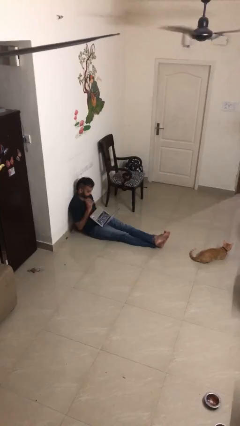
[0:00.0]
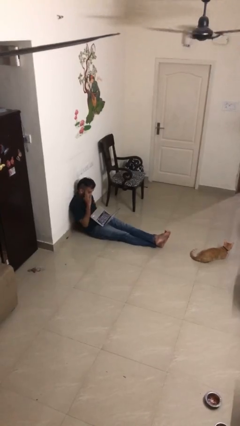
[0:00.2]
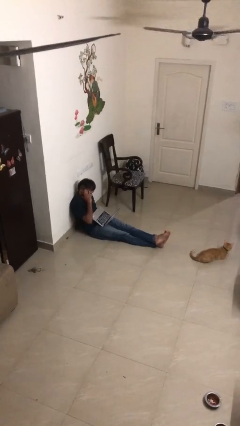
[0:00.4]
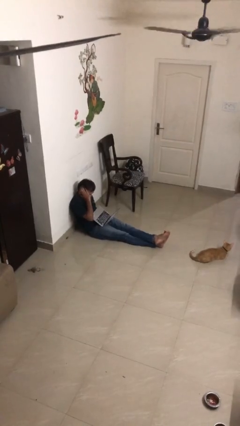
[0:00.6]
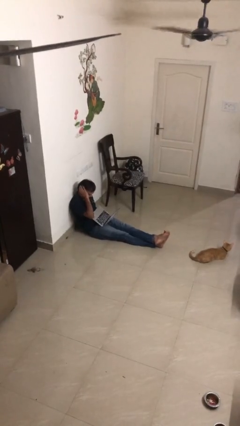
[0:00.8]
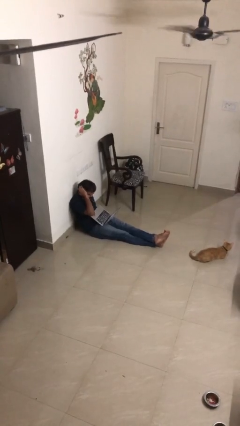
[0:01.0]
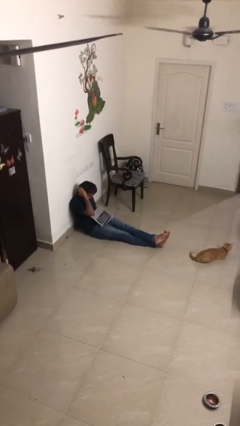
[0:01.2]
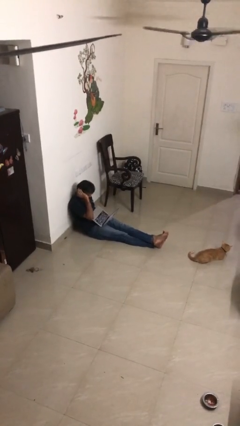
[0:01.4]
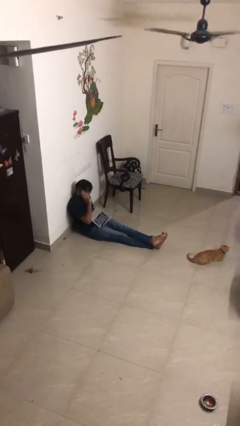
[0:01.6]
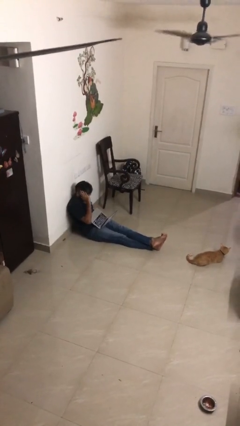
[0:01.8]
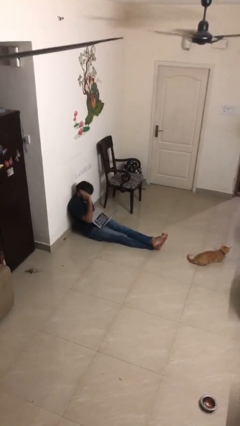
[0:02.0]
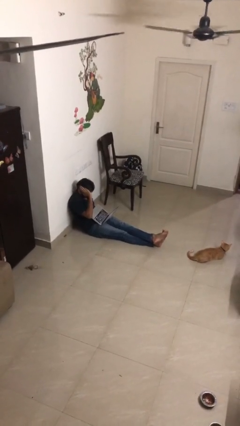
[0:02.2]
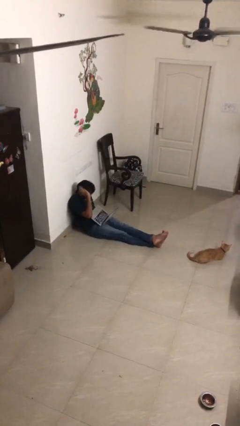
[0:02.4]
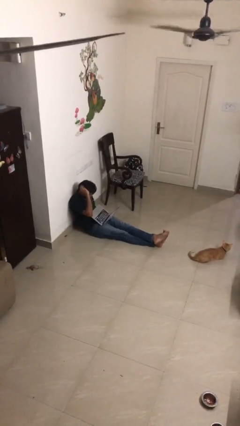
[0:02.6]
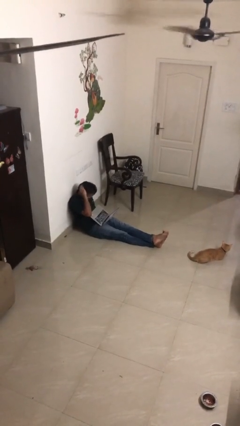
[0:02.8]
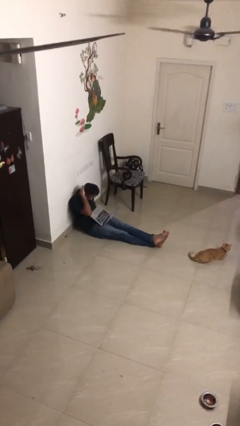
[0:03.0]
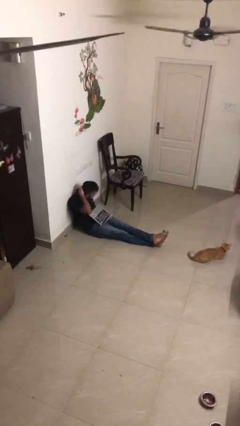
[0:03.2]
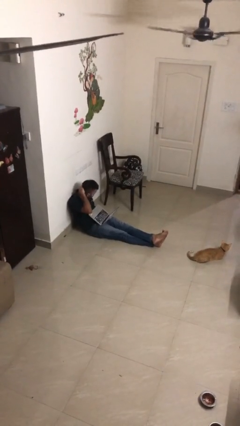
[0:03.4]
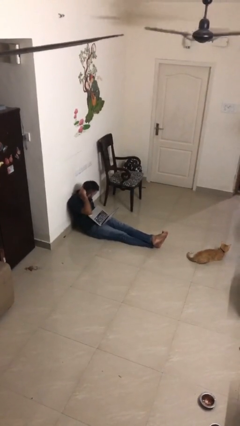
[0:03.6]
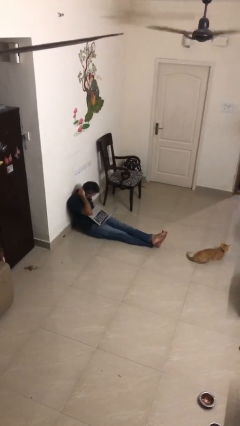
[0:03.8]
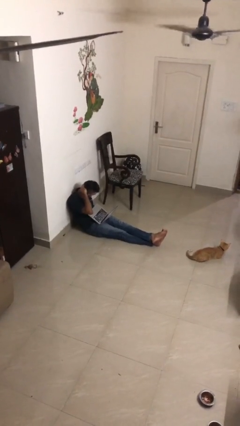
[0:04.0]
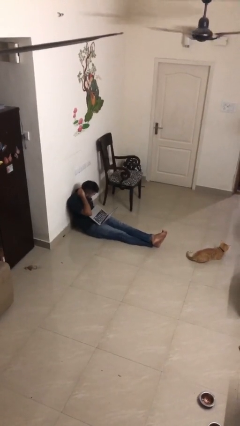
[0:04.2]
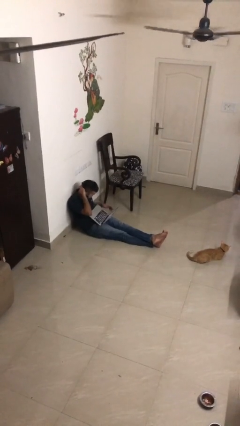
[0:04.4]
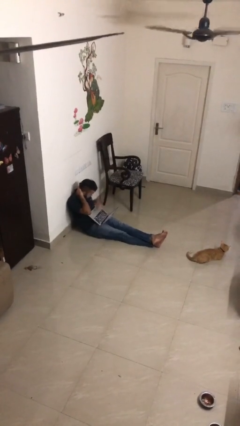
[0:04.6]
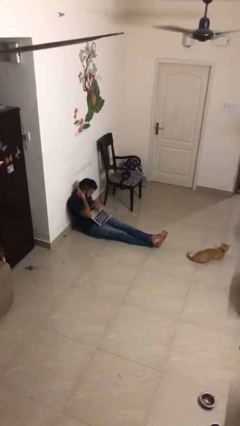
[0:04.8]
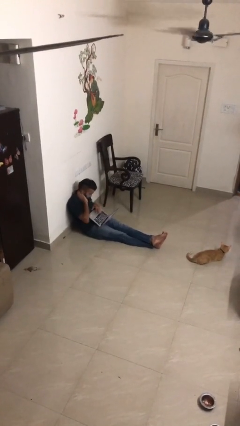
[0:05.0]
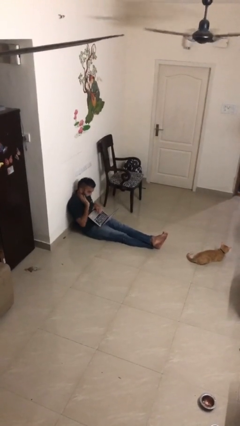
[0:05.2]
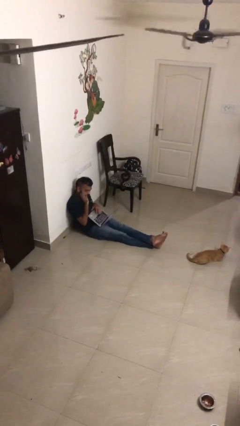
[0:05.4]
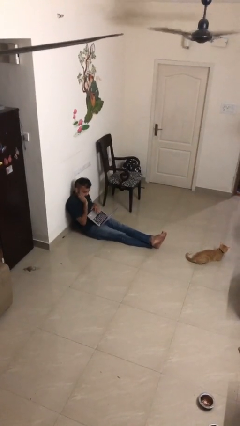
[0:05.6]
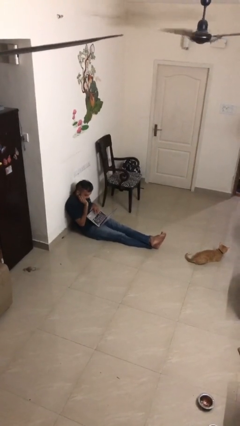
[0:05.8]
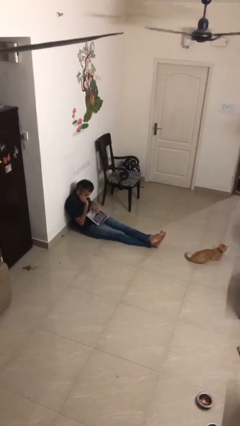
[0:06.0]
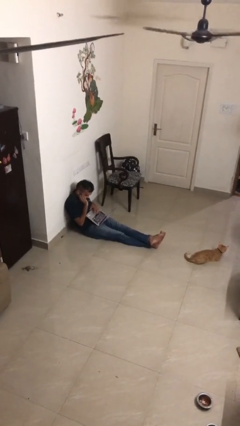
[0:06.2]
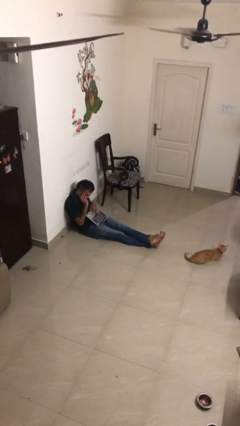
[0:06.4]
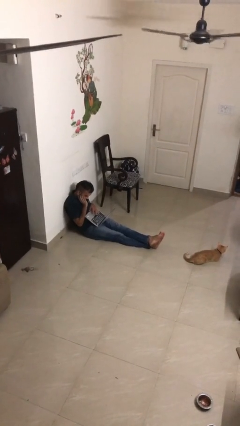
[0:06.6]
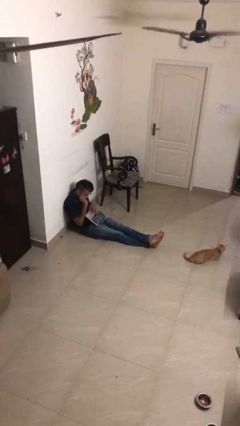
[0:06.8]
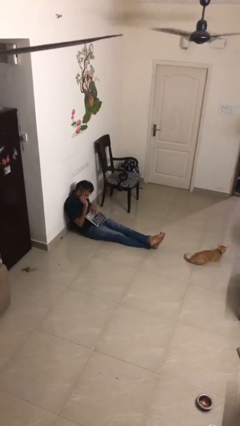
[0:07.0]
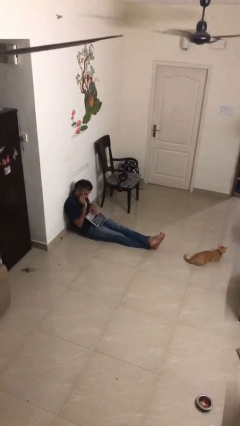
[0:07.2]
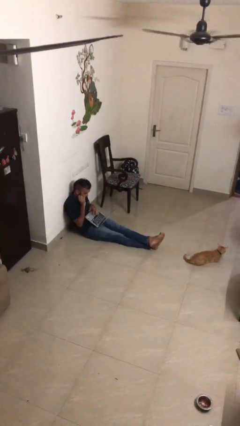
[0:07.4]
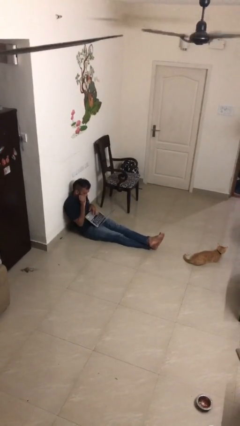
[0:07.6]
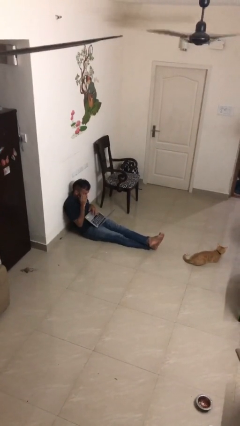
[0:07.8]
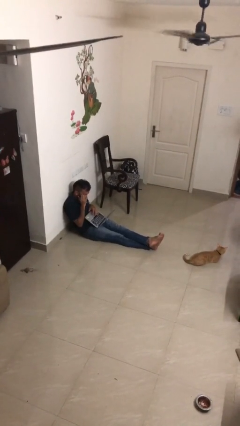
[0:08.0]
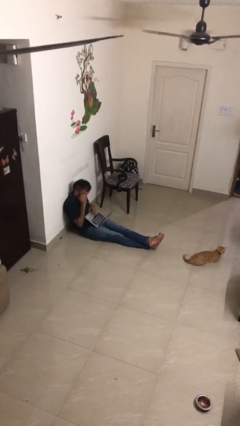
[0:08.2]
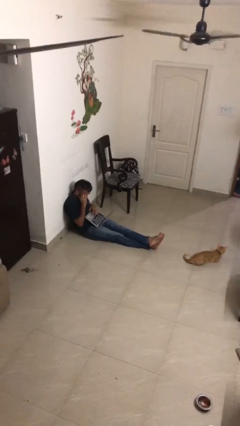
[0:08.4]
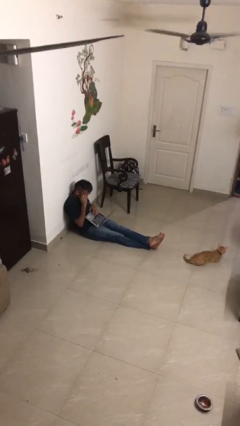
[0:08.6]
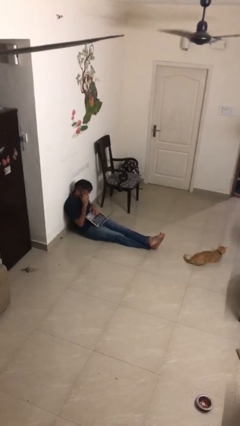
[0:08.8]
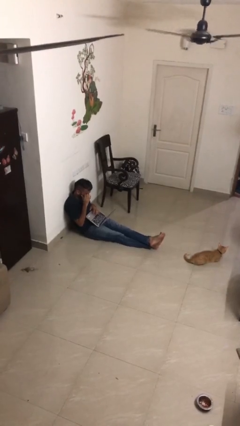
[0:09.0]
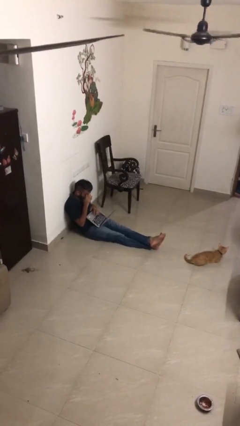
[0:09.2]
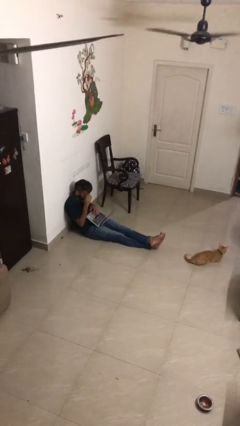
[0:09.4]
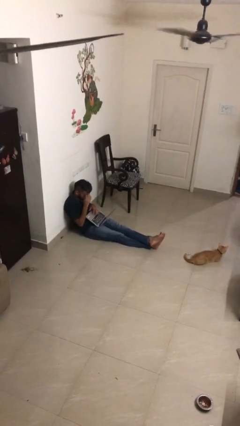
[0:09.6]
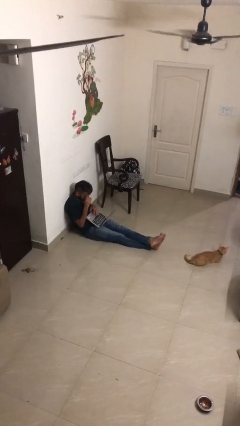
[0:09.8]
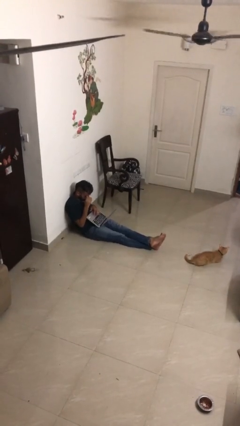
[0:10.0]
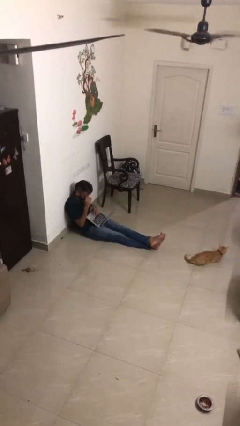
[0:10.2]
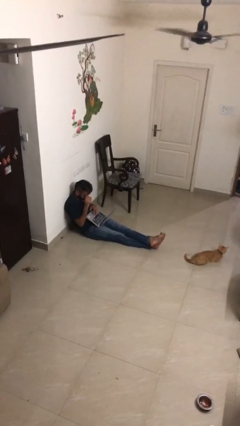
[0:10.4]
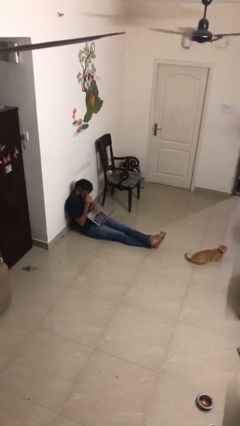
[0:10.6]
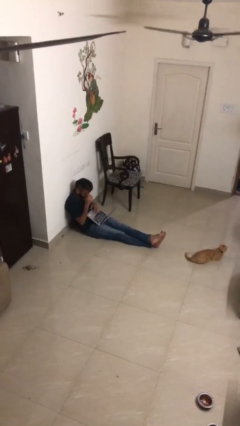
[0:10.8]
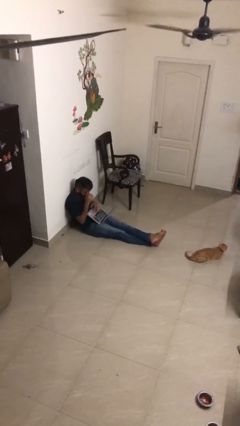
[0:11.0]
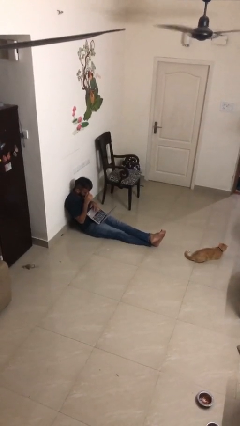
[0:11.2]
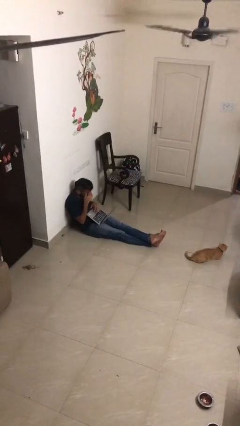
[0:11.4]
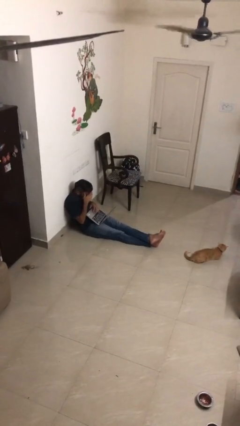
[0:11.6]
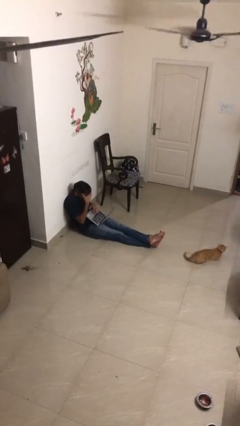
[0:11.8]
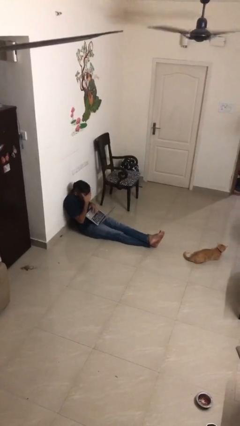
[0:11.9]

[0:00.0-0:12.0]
person interacts with laptop

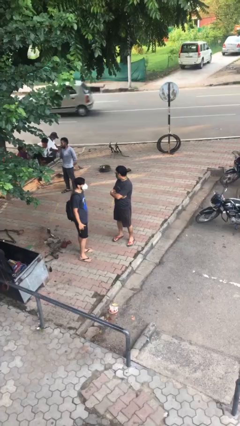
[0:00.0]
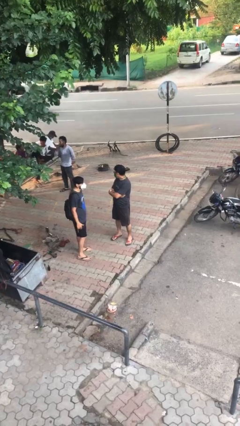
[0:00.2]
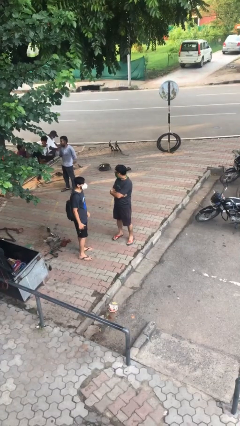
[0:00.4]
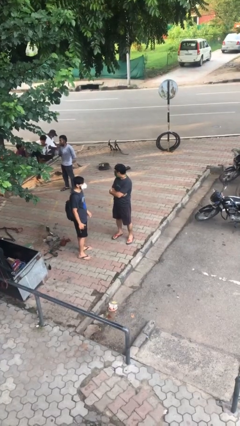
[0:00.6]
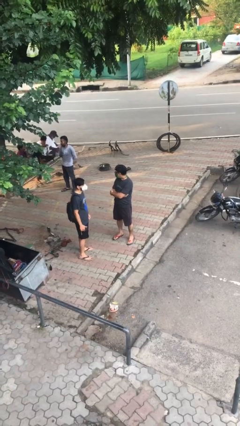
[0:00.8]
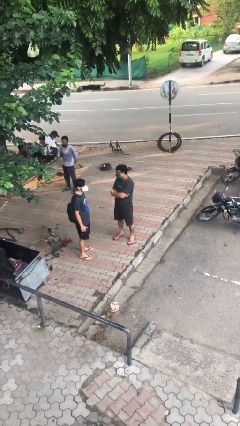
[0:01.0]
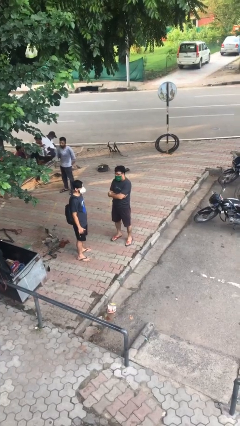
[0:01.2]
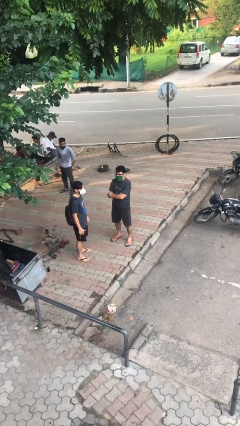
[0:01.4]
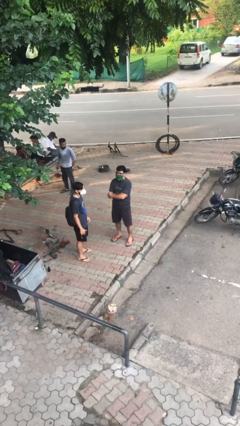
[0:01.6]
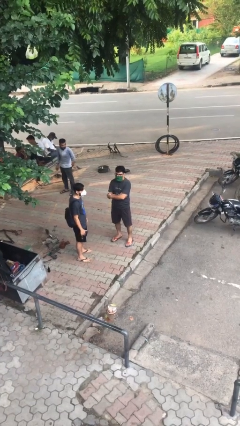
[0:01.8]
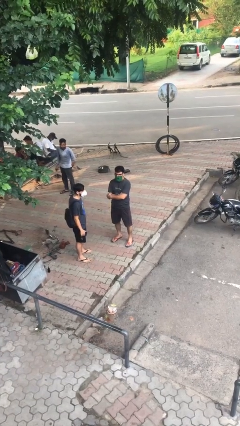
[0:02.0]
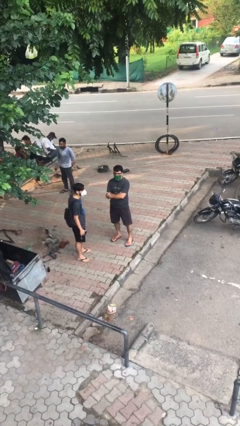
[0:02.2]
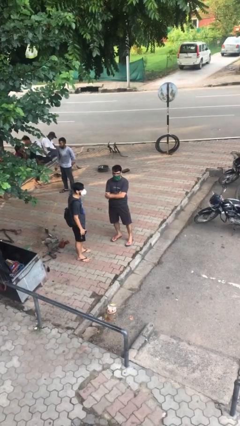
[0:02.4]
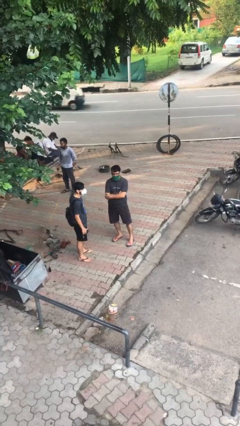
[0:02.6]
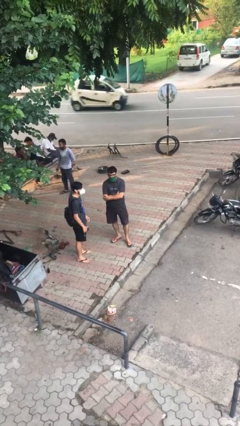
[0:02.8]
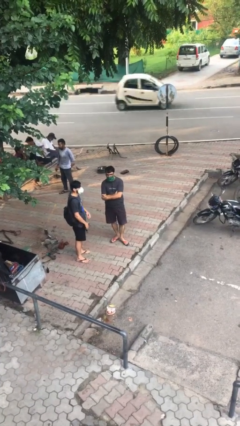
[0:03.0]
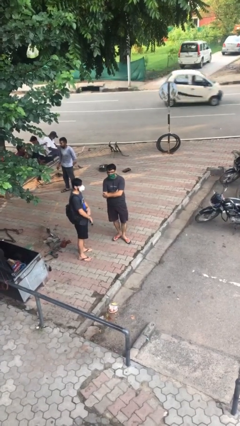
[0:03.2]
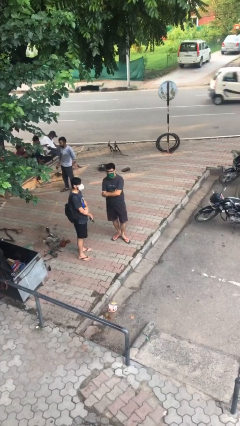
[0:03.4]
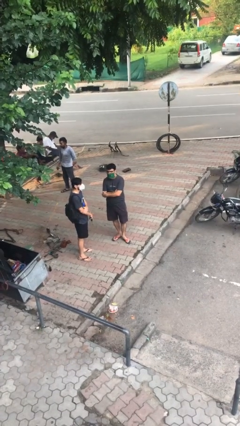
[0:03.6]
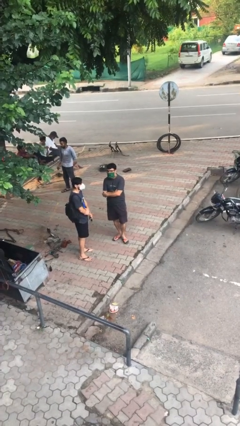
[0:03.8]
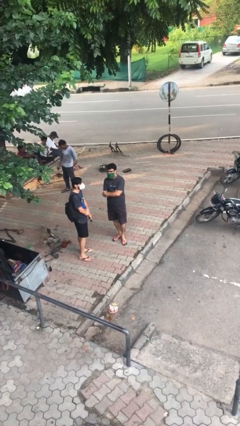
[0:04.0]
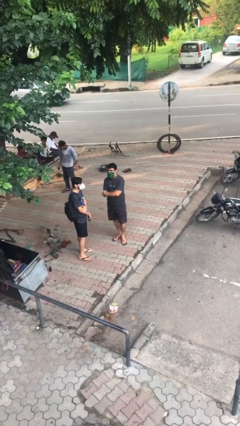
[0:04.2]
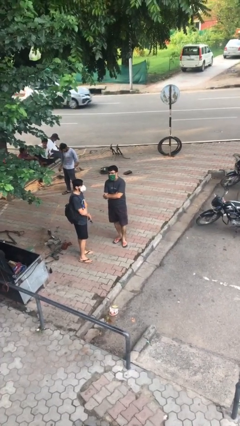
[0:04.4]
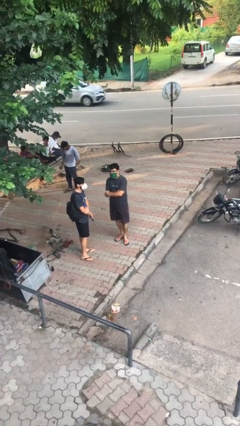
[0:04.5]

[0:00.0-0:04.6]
person talks to person

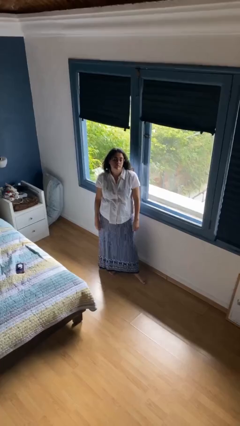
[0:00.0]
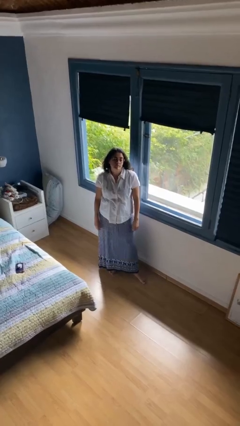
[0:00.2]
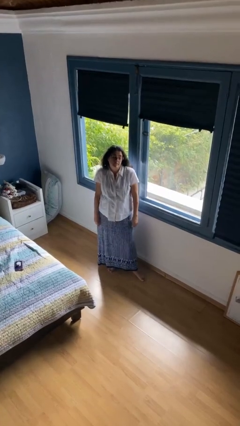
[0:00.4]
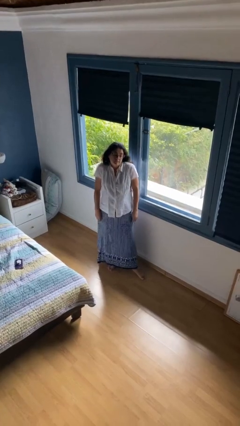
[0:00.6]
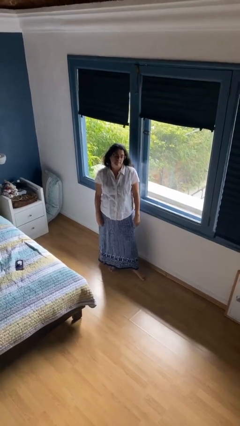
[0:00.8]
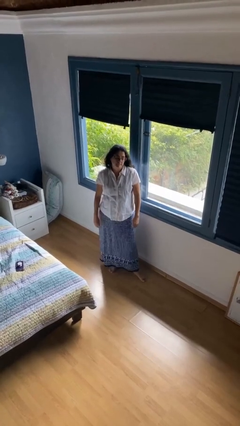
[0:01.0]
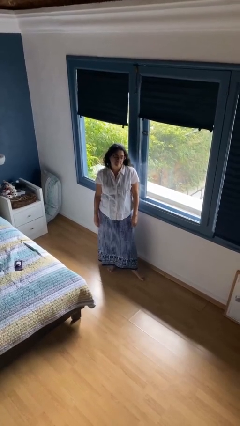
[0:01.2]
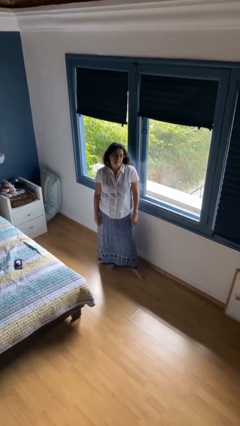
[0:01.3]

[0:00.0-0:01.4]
person shrugs
